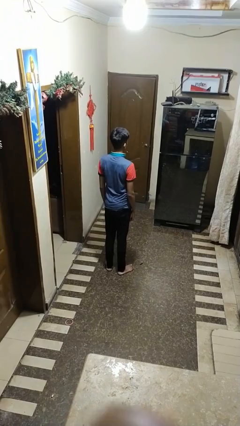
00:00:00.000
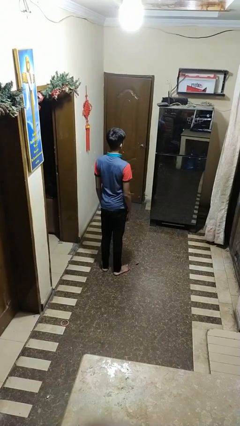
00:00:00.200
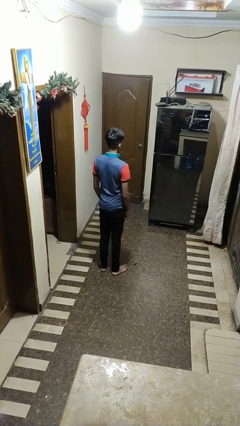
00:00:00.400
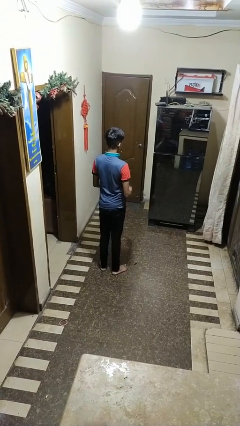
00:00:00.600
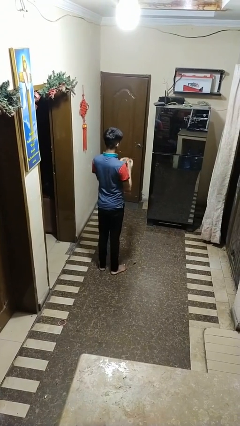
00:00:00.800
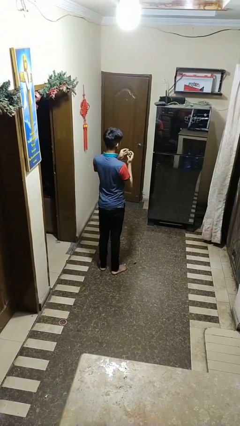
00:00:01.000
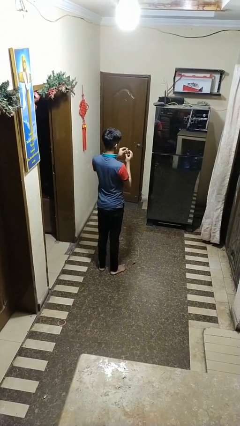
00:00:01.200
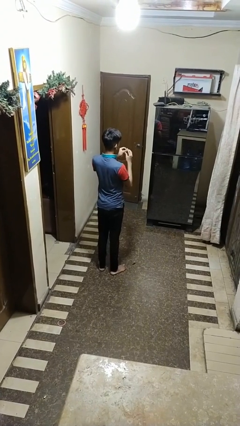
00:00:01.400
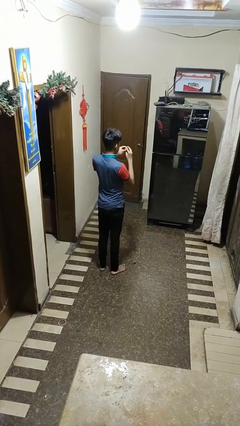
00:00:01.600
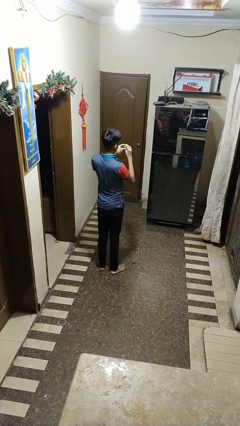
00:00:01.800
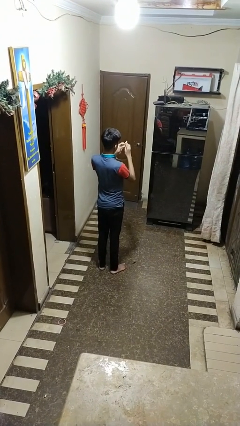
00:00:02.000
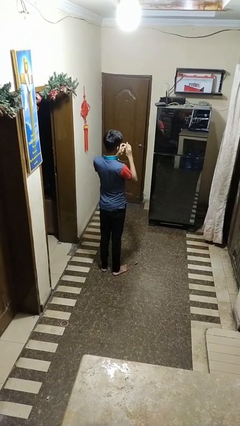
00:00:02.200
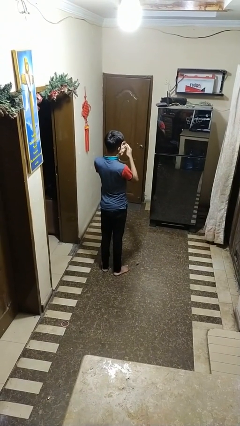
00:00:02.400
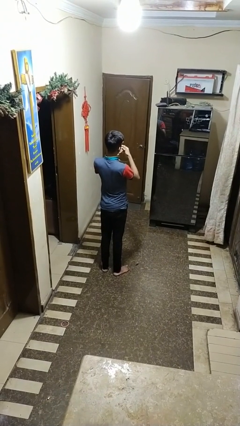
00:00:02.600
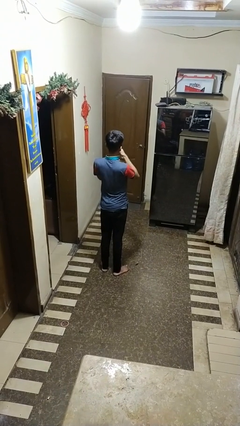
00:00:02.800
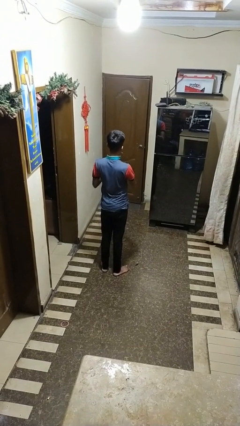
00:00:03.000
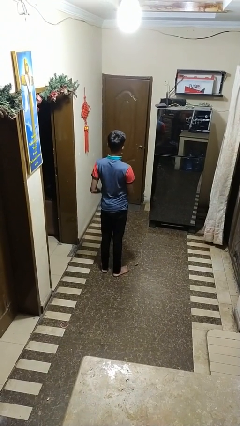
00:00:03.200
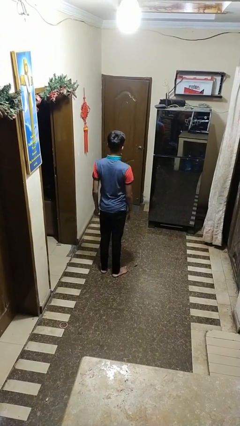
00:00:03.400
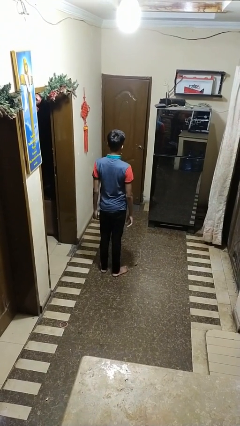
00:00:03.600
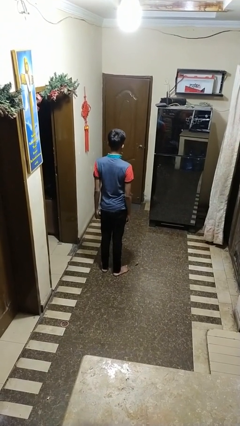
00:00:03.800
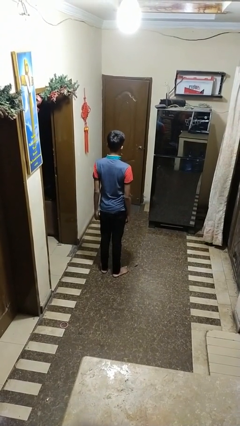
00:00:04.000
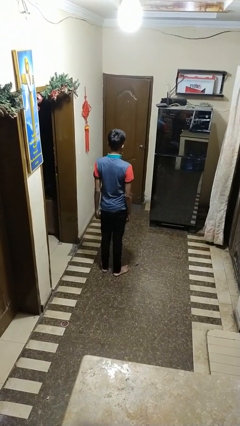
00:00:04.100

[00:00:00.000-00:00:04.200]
person puts on ring

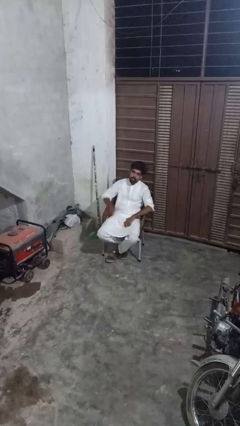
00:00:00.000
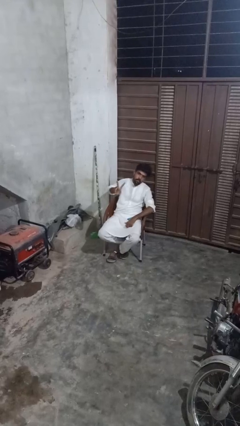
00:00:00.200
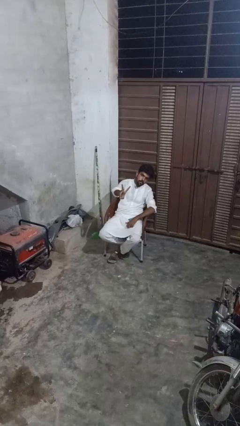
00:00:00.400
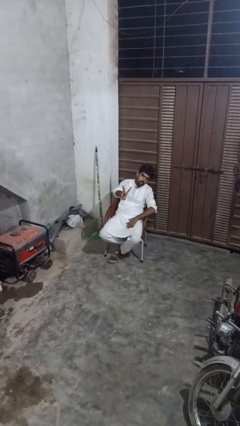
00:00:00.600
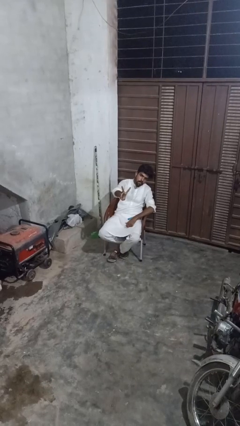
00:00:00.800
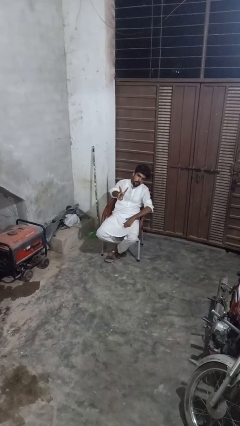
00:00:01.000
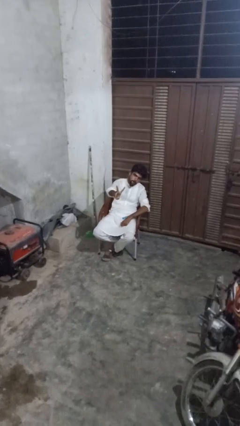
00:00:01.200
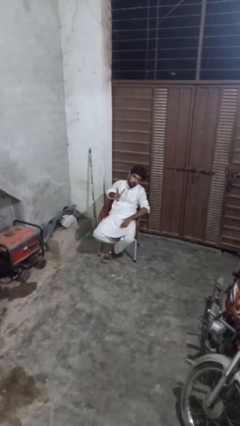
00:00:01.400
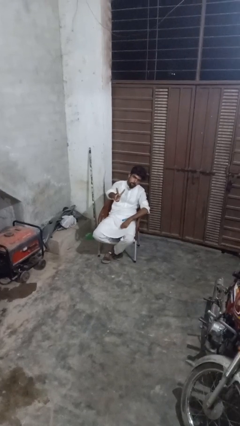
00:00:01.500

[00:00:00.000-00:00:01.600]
person gestures peace

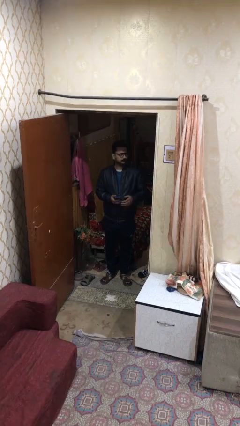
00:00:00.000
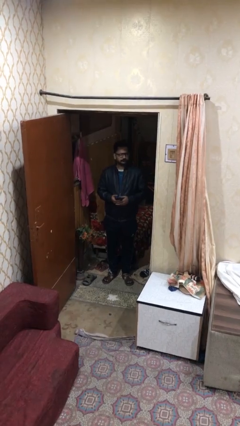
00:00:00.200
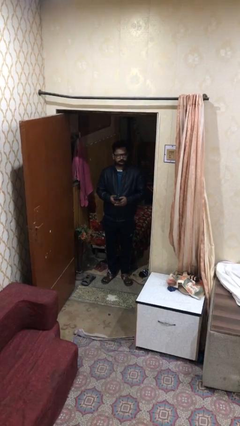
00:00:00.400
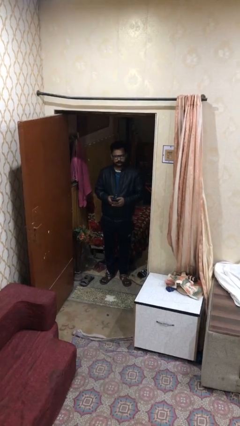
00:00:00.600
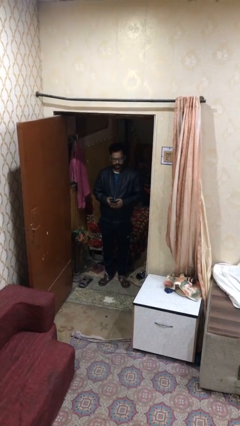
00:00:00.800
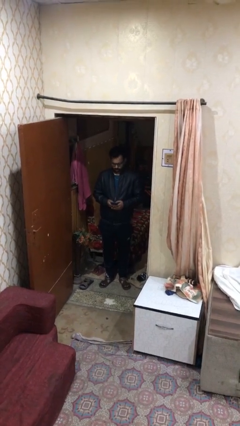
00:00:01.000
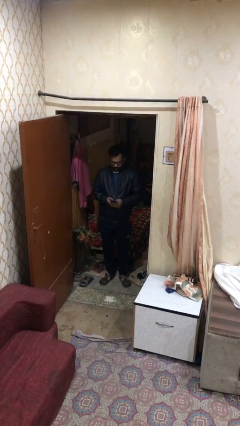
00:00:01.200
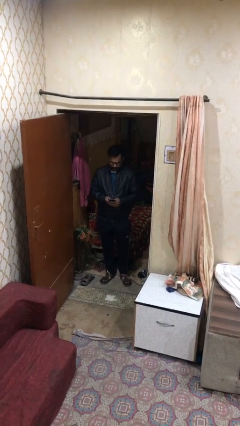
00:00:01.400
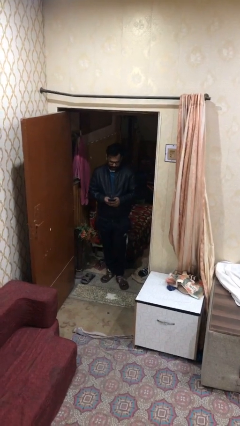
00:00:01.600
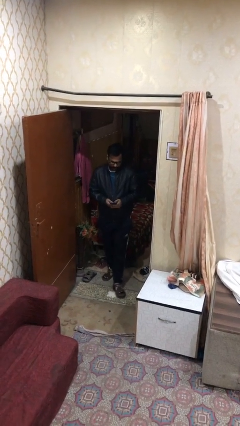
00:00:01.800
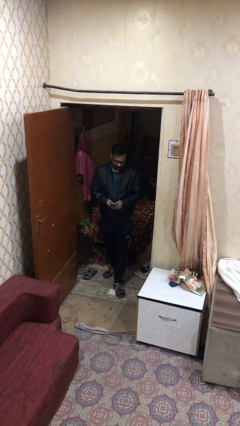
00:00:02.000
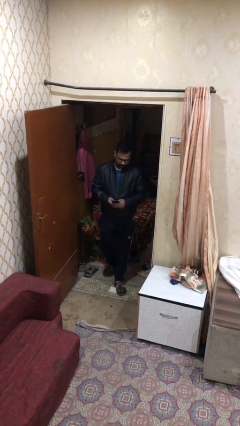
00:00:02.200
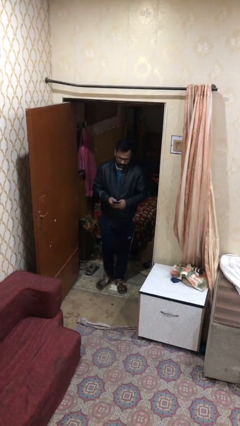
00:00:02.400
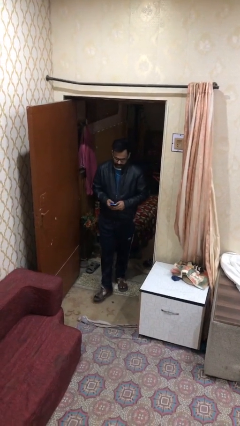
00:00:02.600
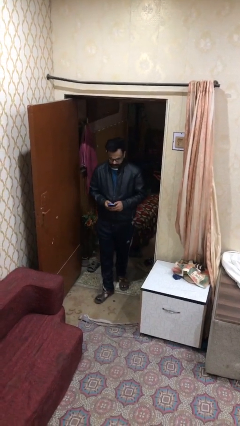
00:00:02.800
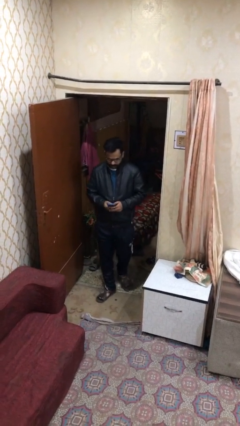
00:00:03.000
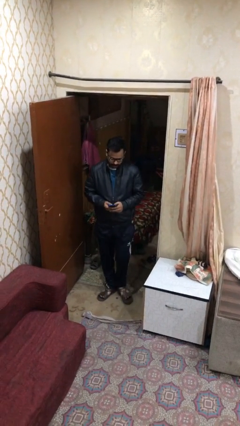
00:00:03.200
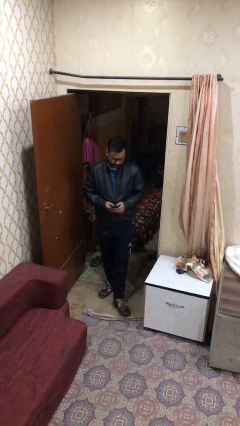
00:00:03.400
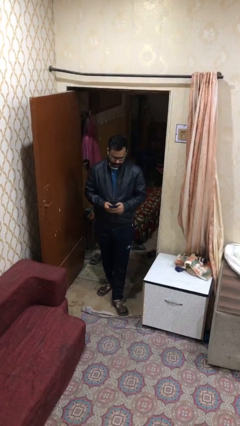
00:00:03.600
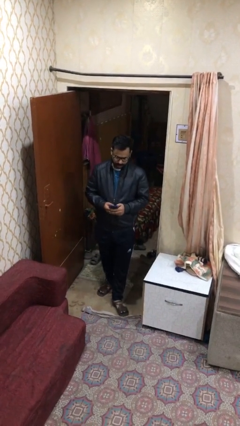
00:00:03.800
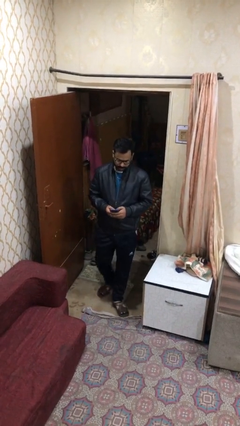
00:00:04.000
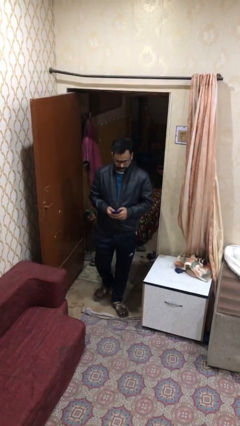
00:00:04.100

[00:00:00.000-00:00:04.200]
person enters scene through structure

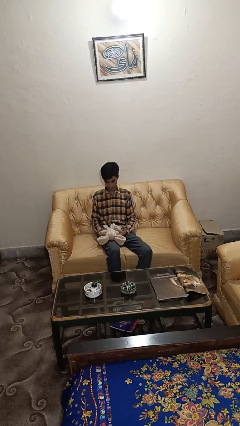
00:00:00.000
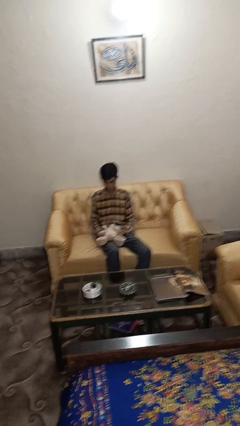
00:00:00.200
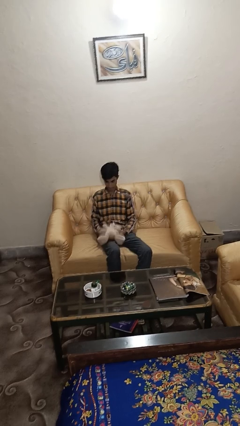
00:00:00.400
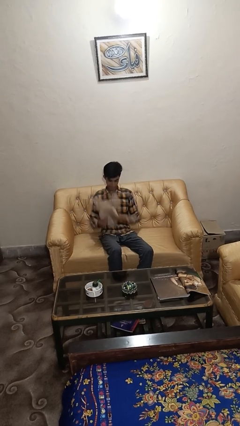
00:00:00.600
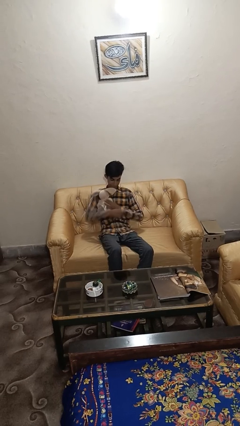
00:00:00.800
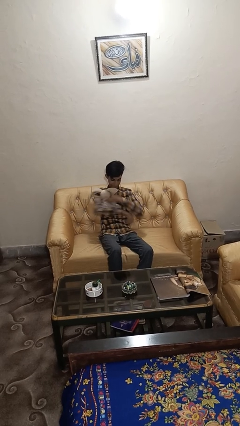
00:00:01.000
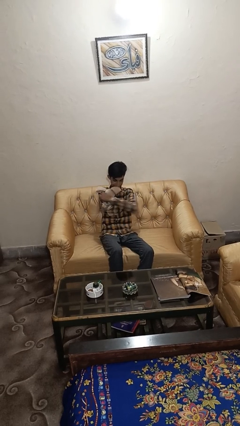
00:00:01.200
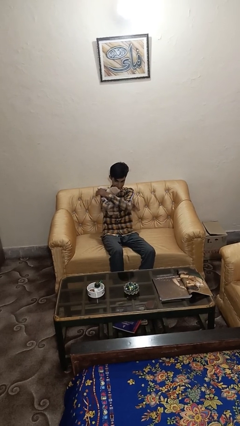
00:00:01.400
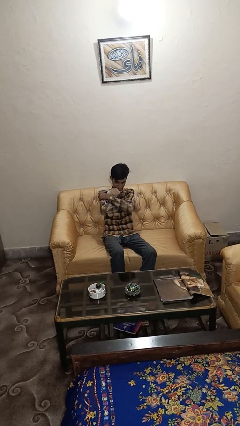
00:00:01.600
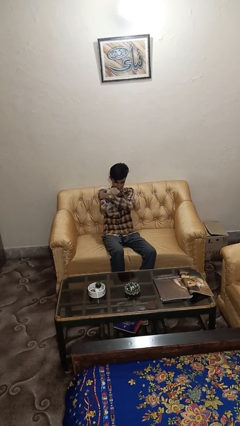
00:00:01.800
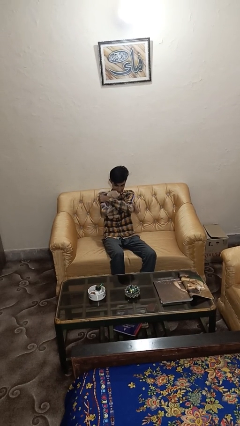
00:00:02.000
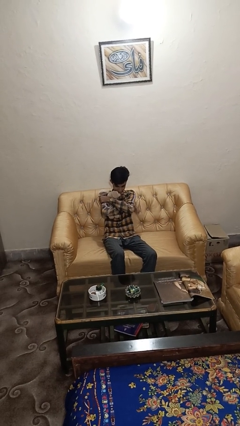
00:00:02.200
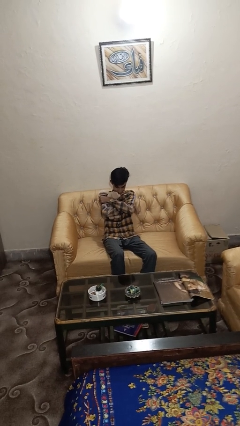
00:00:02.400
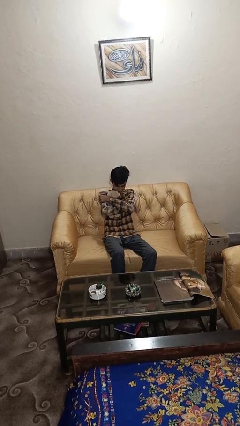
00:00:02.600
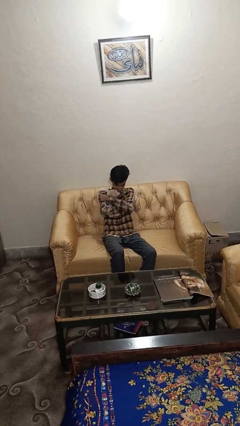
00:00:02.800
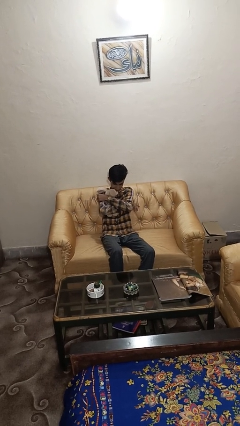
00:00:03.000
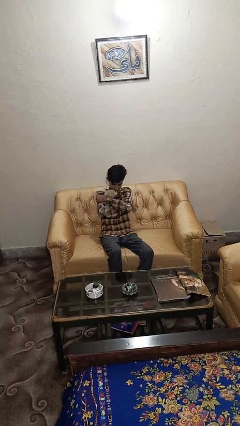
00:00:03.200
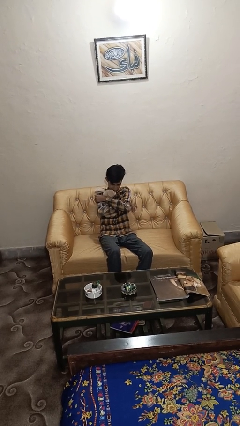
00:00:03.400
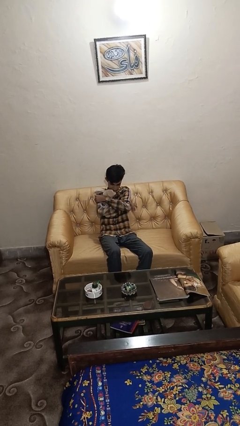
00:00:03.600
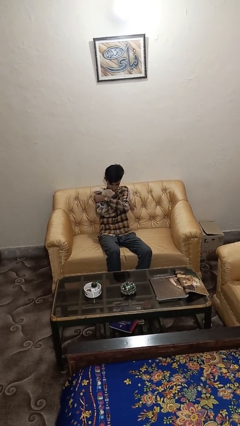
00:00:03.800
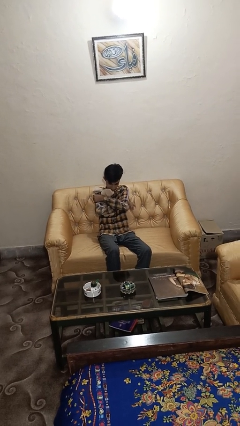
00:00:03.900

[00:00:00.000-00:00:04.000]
person hugs stuffed animal

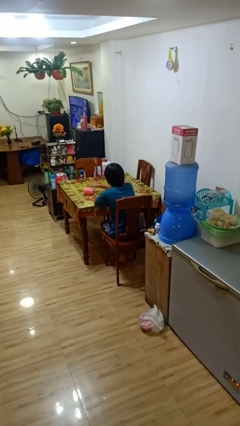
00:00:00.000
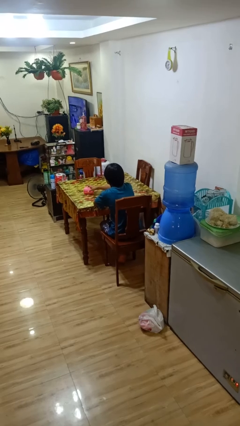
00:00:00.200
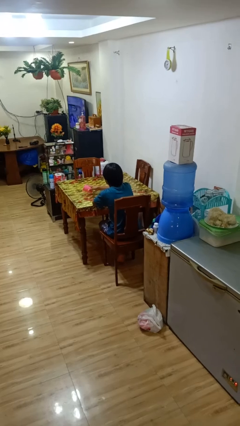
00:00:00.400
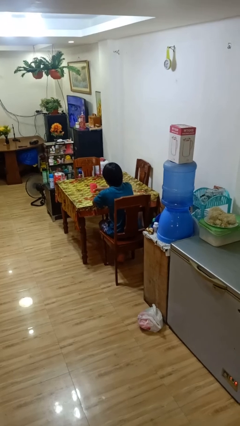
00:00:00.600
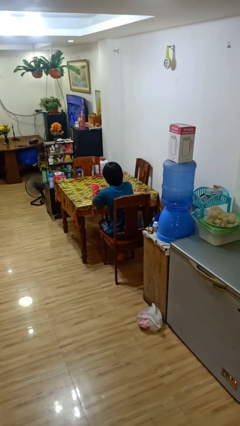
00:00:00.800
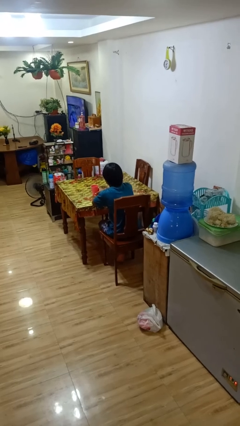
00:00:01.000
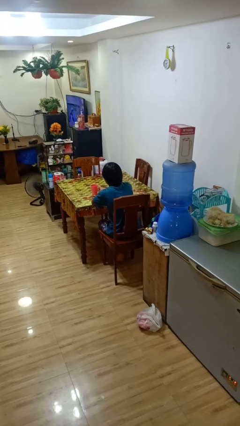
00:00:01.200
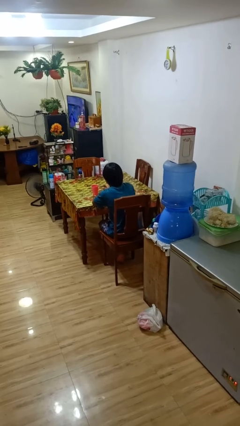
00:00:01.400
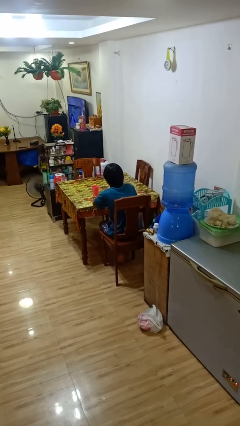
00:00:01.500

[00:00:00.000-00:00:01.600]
person sets upright glass

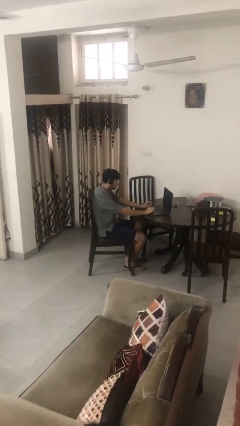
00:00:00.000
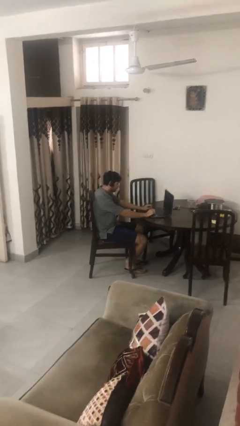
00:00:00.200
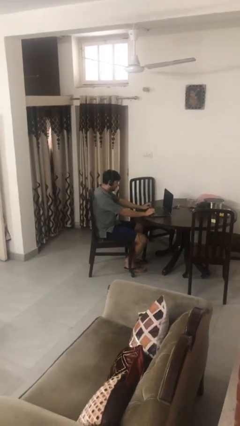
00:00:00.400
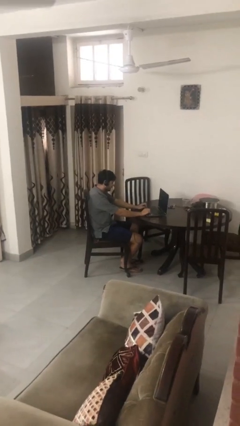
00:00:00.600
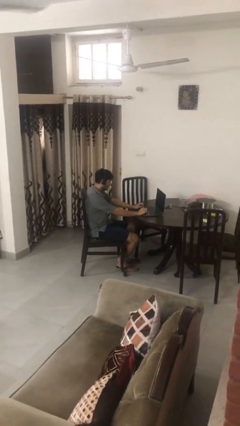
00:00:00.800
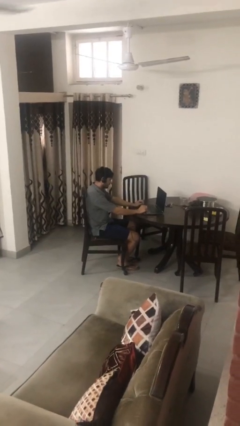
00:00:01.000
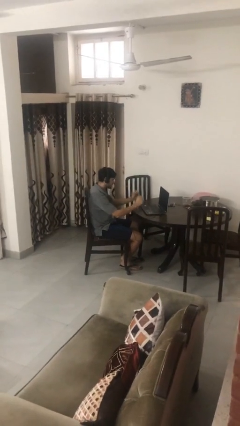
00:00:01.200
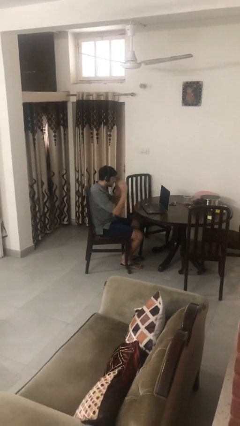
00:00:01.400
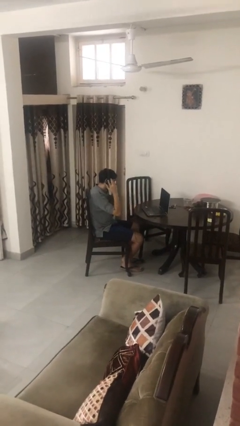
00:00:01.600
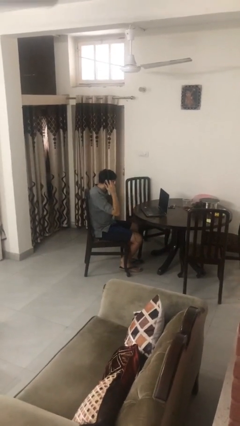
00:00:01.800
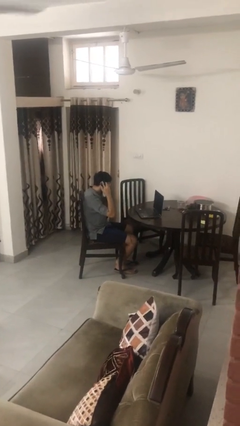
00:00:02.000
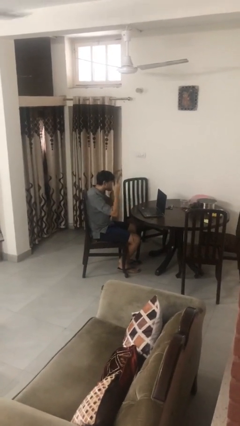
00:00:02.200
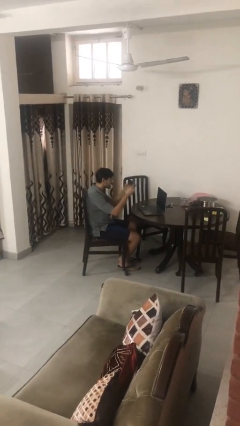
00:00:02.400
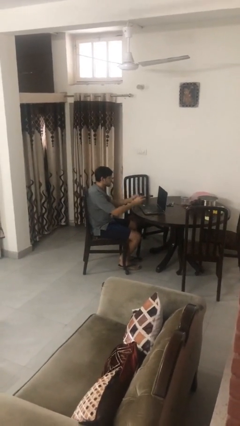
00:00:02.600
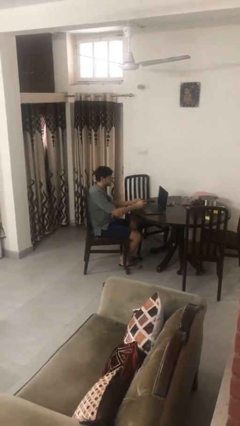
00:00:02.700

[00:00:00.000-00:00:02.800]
person takes off headphones
